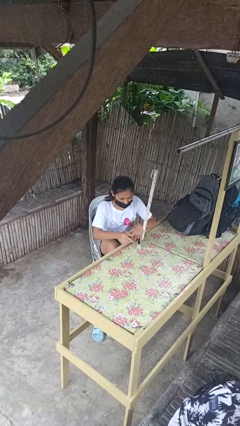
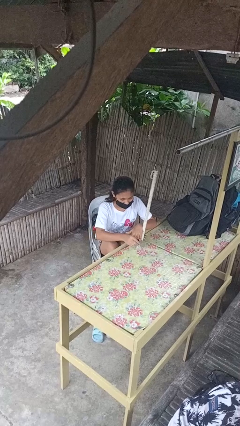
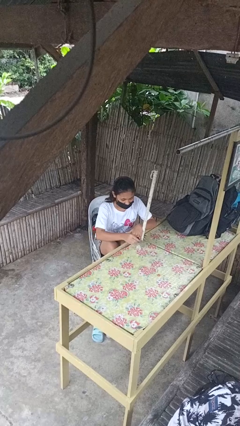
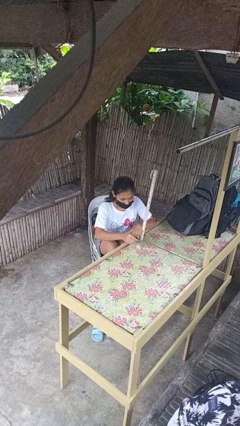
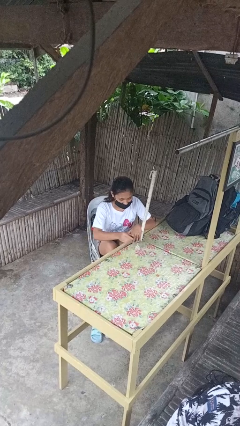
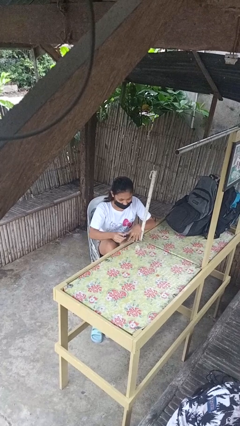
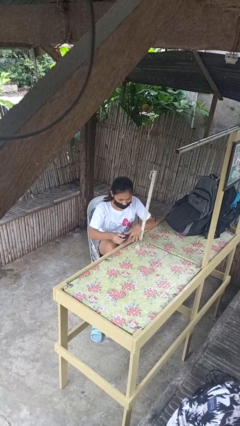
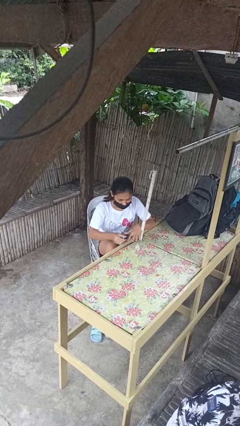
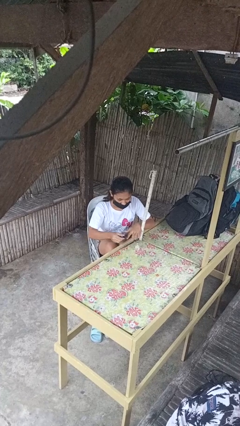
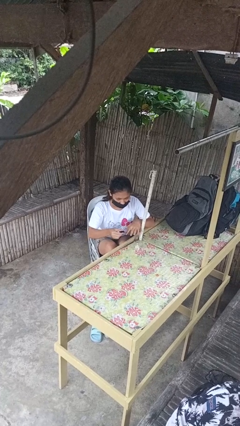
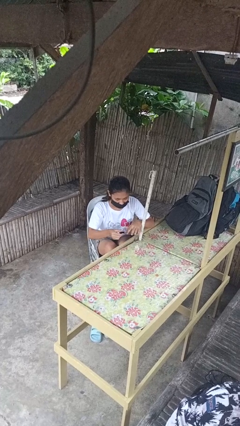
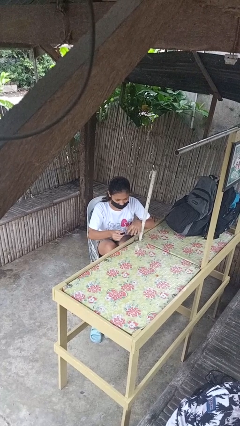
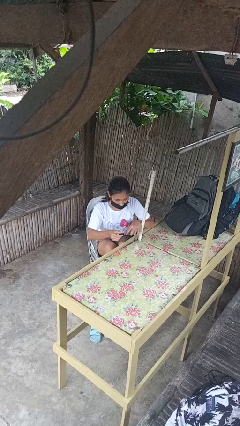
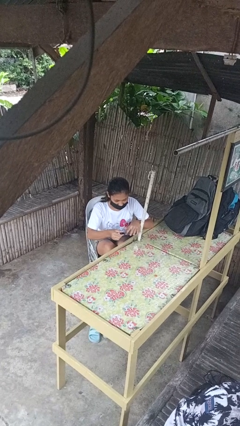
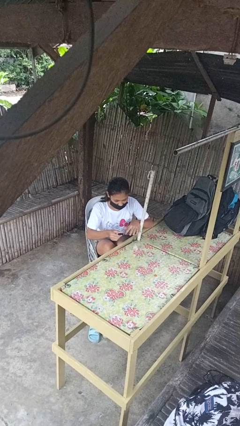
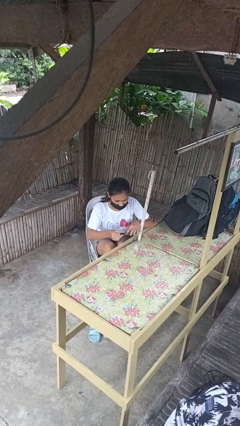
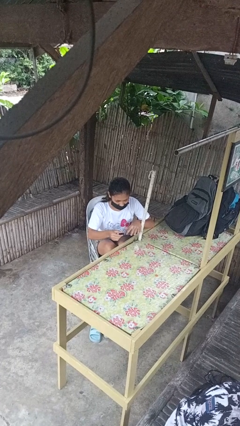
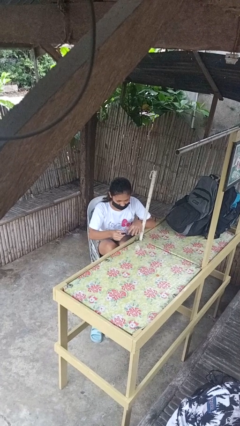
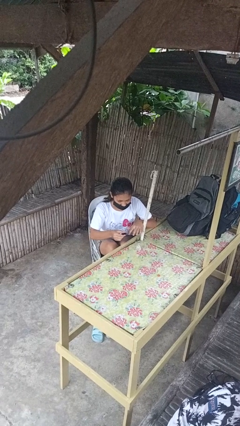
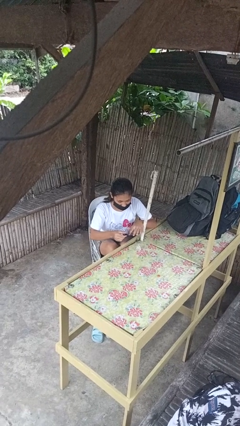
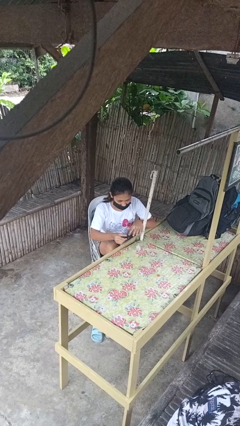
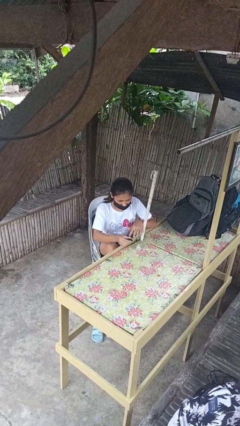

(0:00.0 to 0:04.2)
person paints fingernails

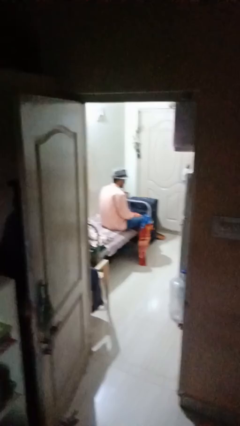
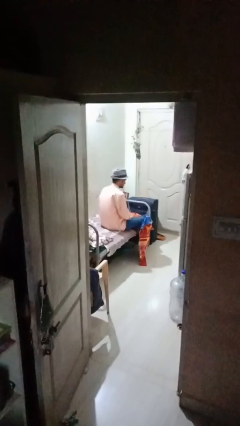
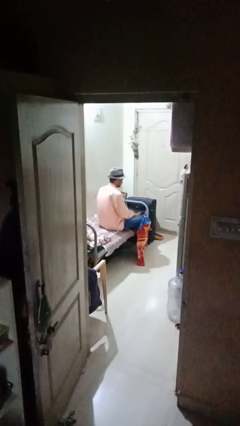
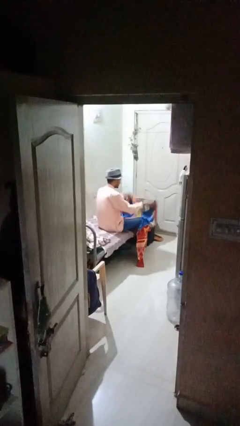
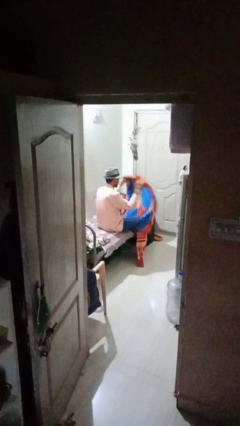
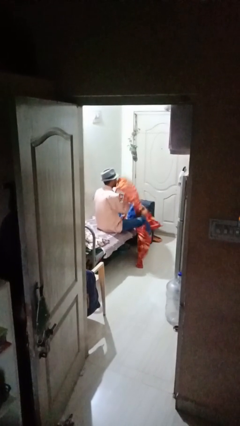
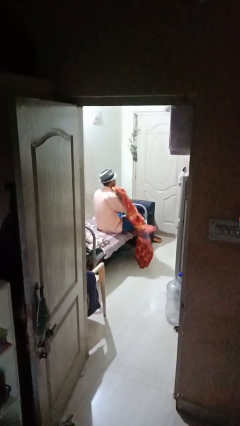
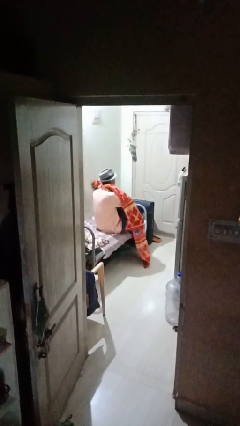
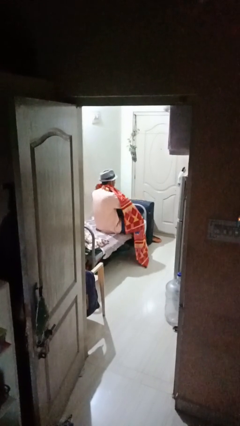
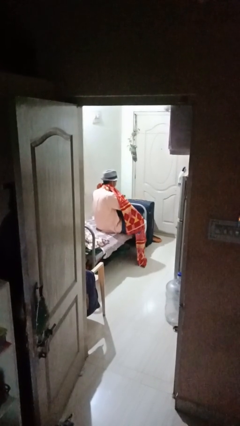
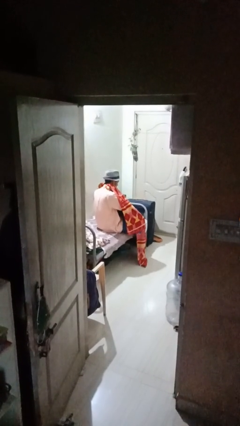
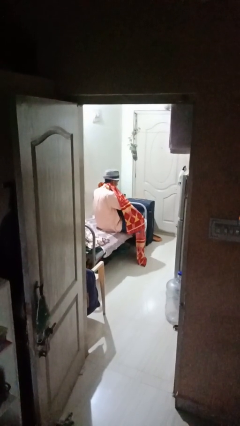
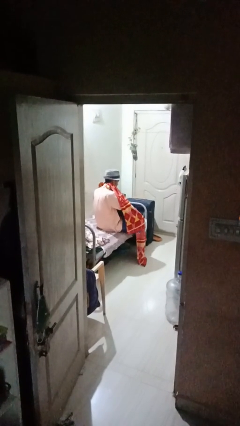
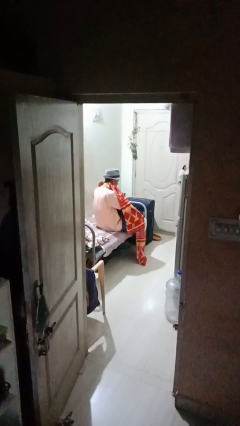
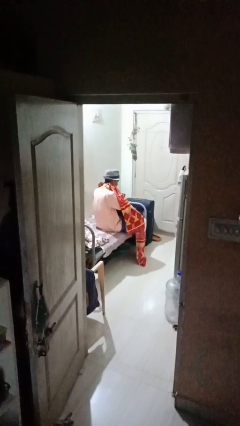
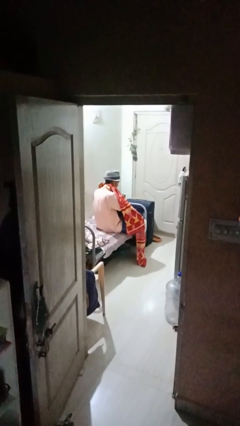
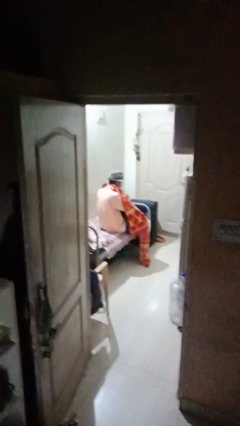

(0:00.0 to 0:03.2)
person covers with blanket

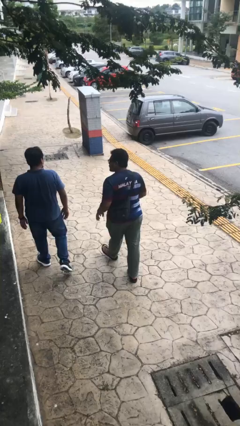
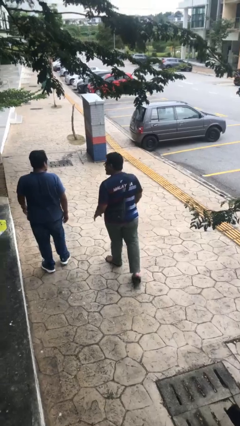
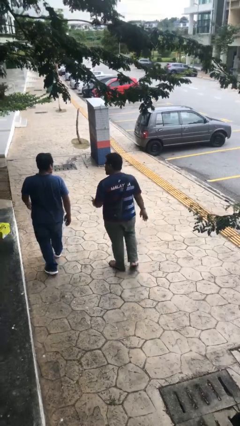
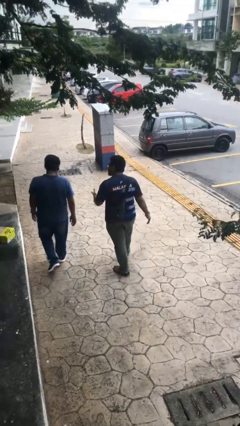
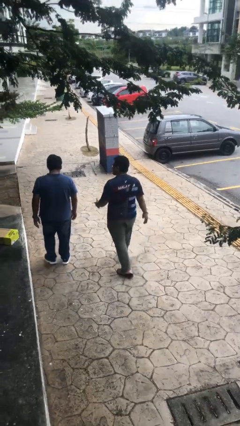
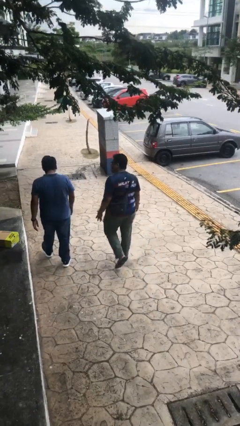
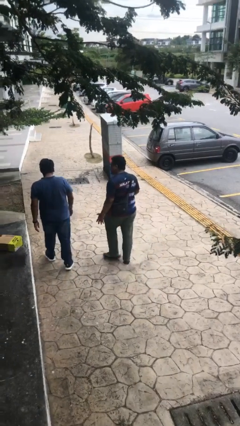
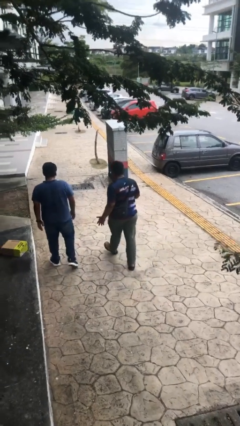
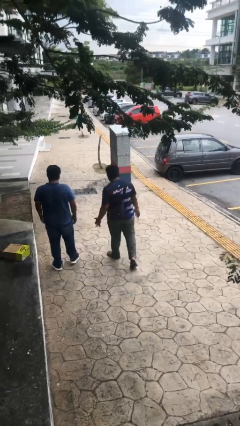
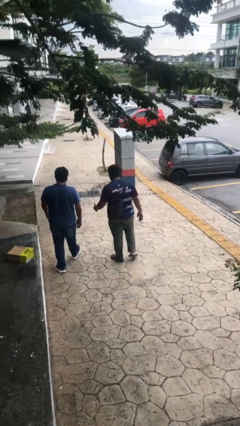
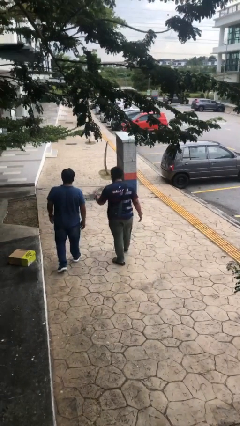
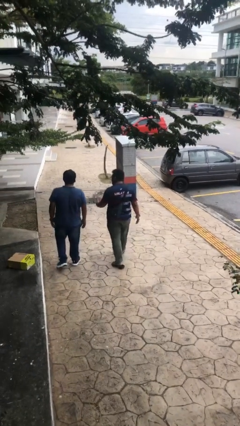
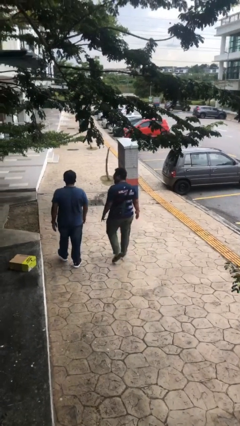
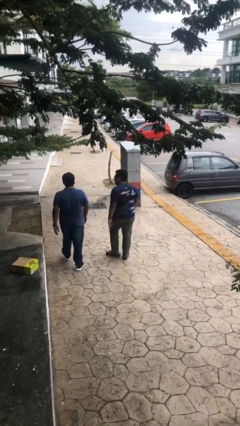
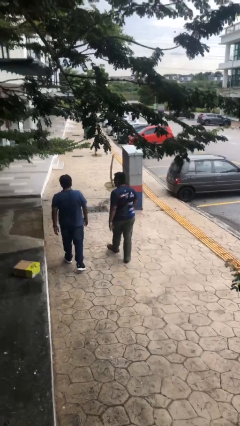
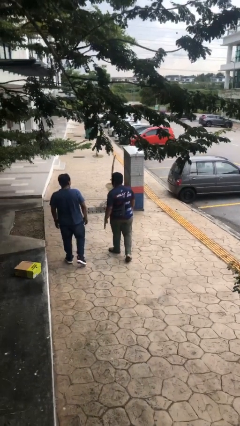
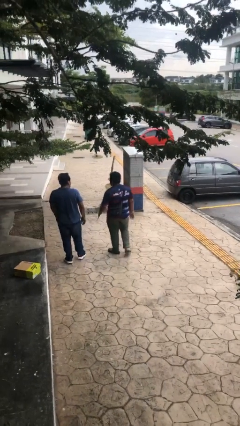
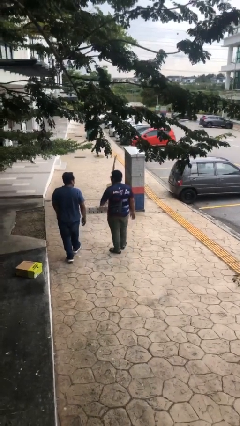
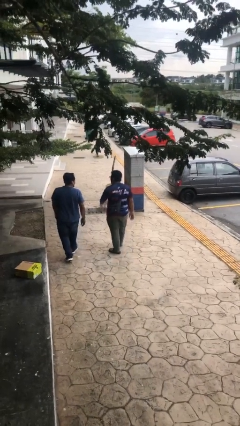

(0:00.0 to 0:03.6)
person talks to person

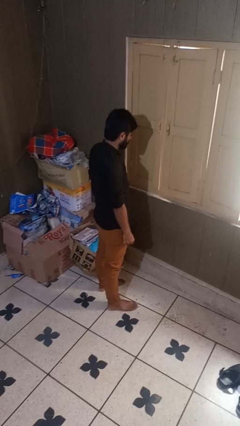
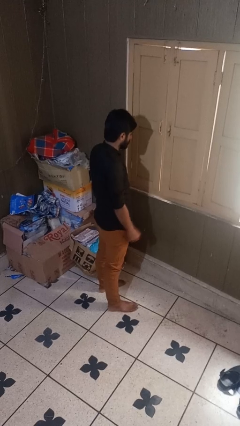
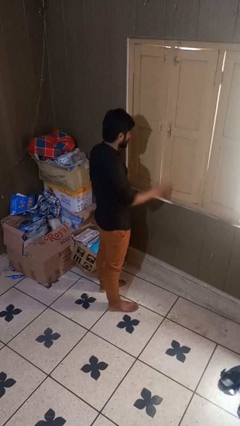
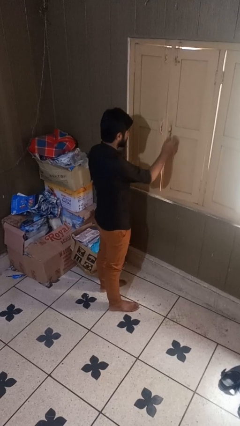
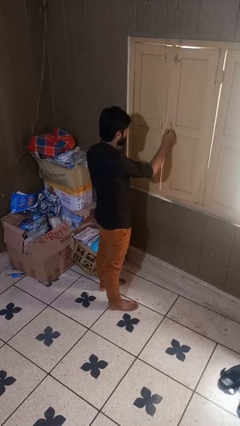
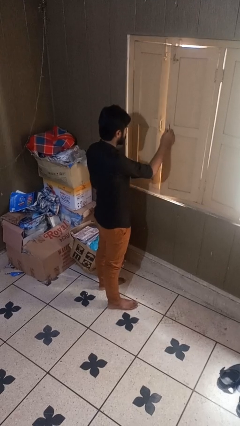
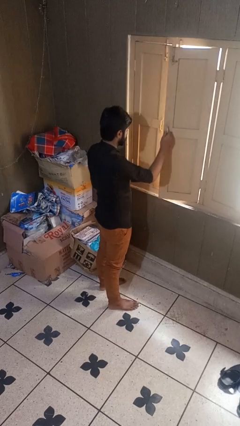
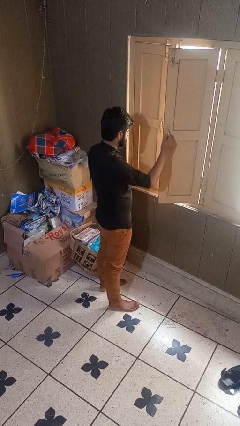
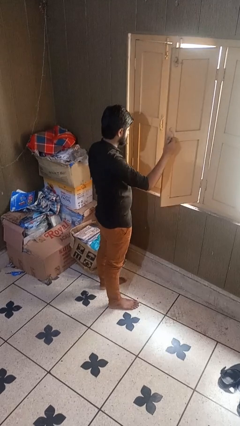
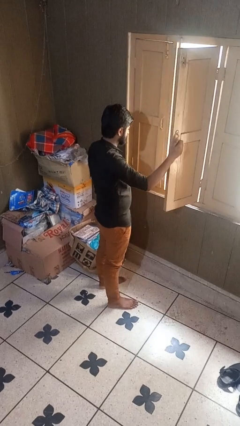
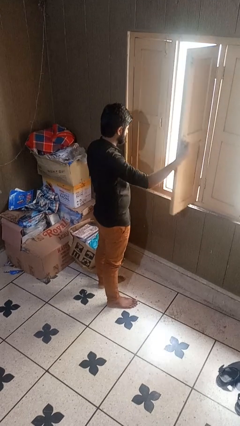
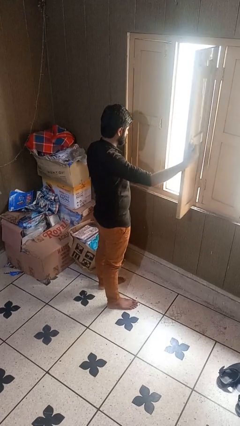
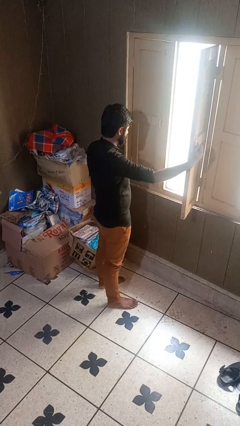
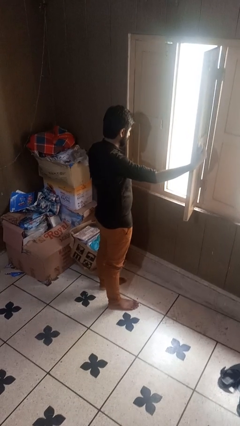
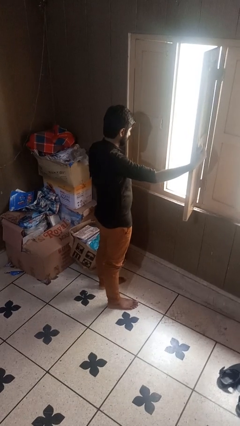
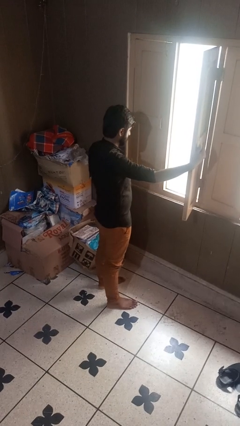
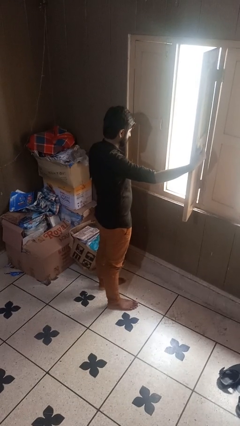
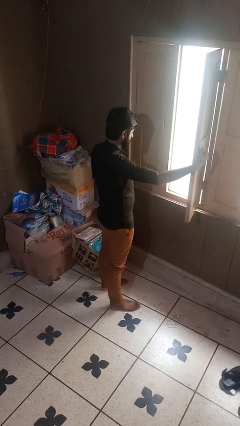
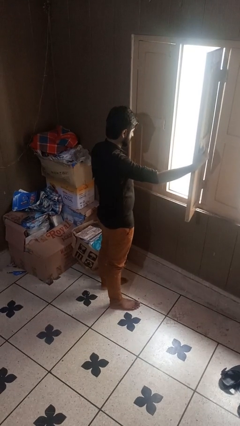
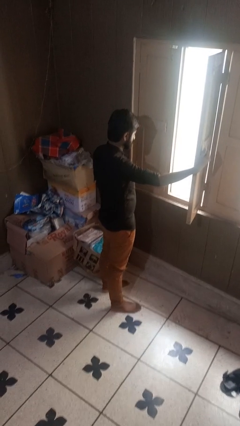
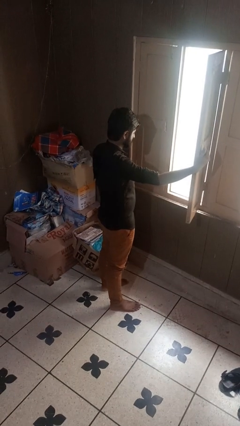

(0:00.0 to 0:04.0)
person opens home window

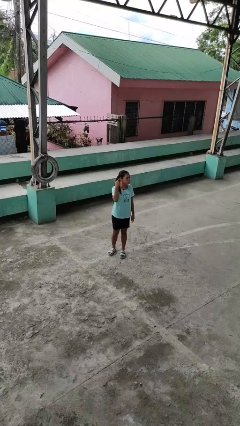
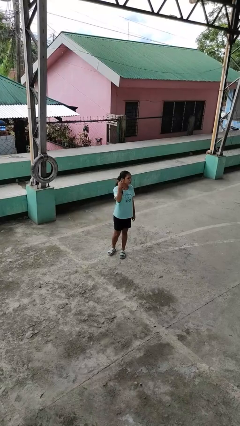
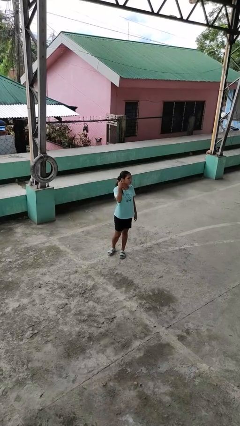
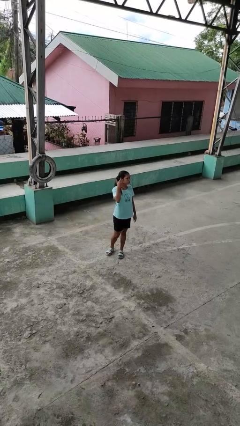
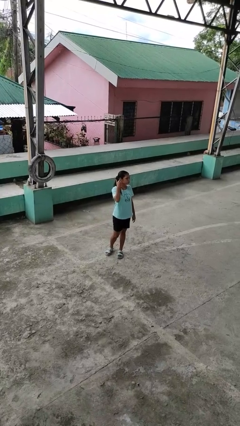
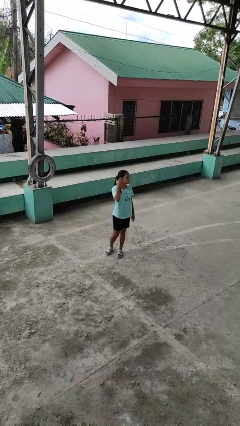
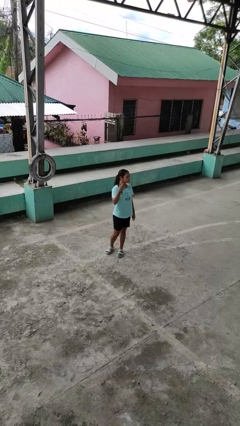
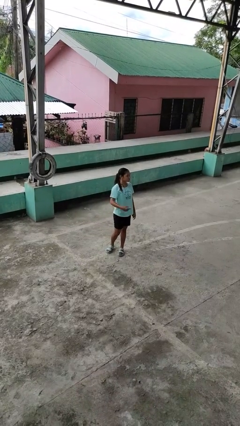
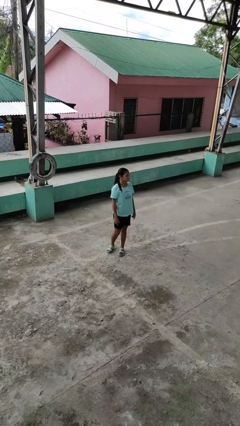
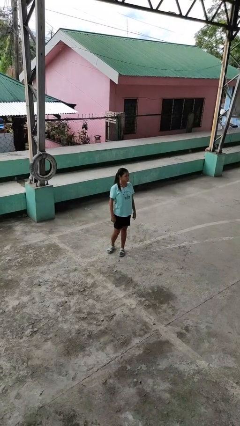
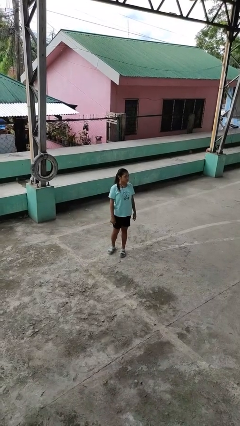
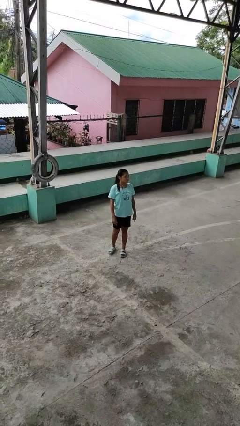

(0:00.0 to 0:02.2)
person gestures listen closely

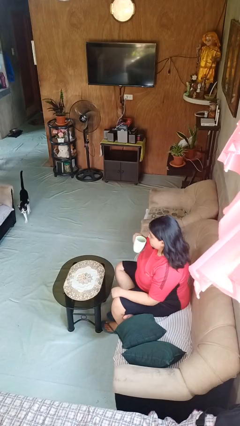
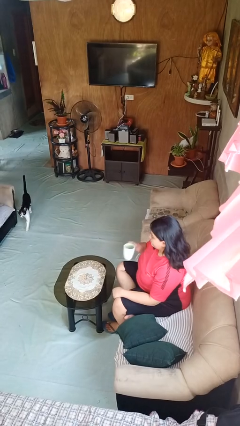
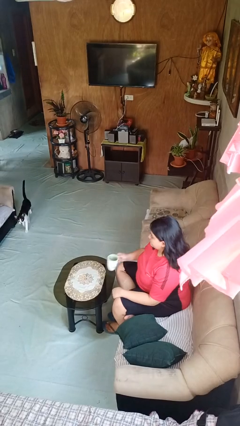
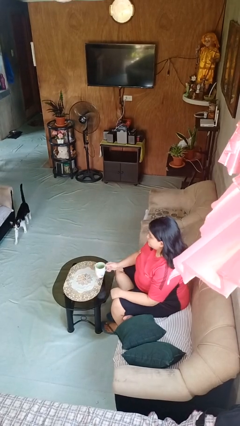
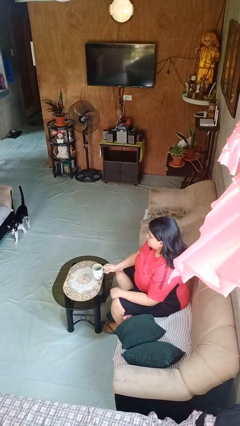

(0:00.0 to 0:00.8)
person puts down object on table
